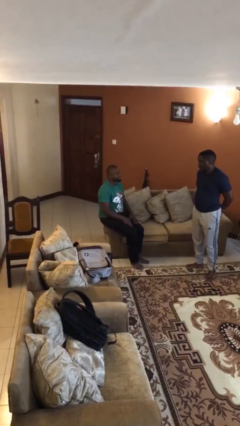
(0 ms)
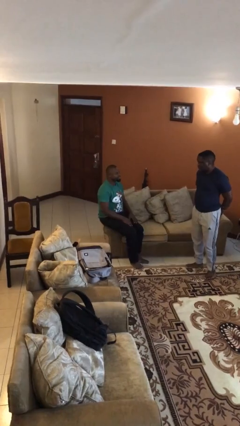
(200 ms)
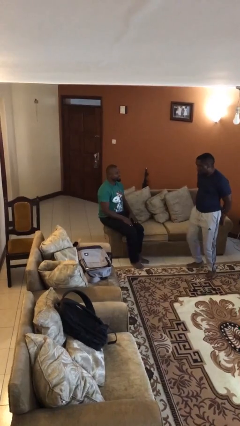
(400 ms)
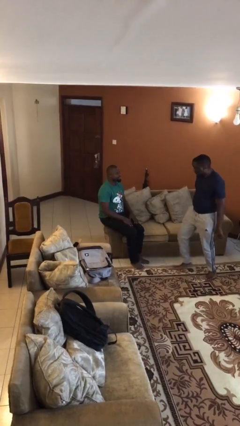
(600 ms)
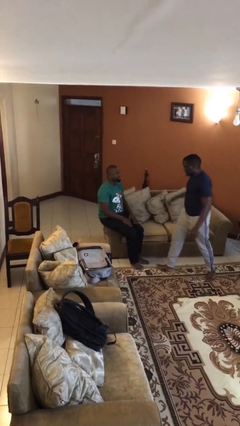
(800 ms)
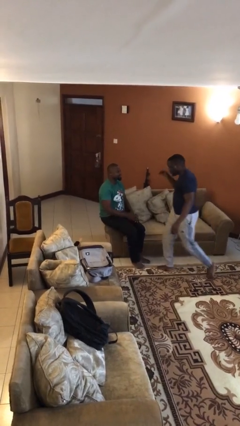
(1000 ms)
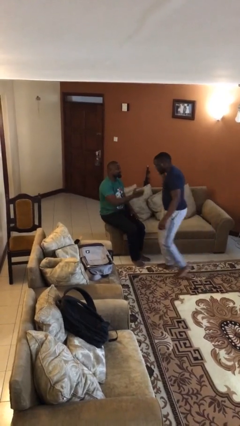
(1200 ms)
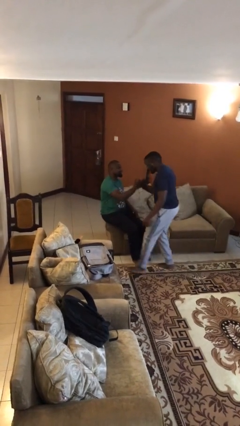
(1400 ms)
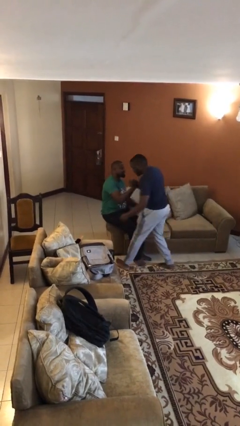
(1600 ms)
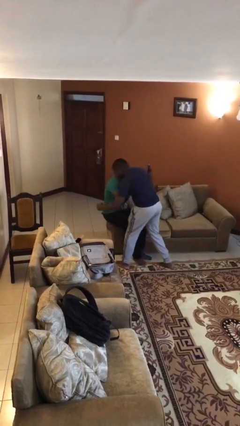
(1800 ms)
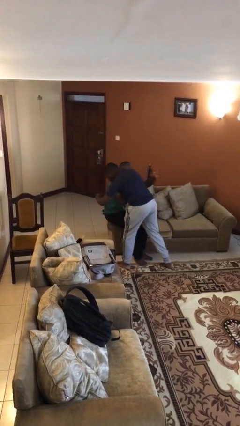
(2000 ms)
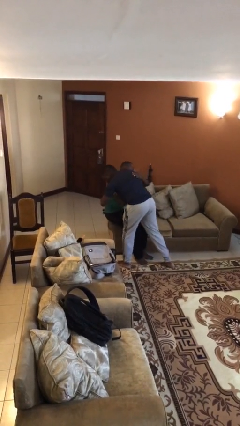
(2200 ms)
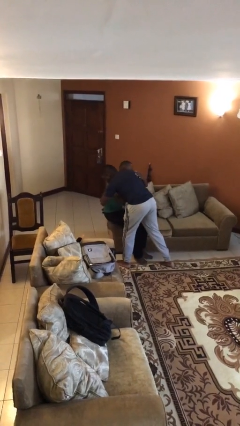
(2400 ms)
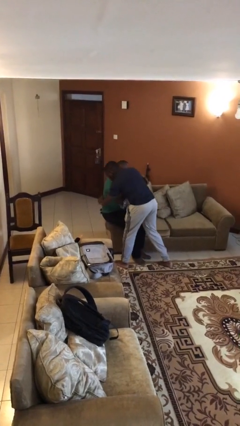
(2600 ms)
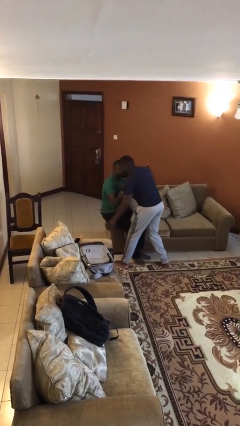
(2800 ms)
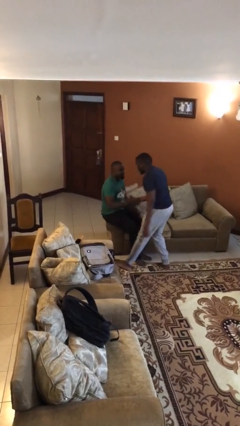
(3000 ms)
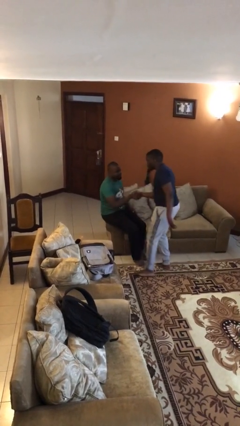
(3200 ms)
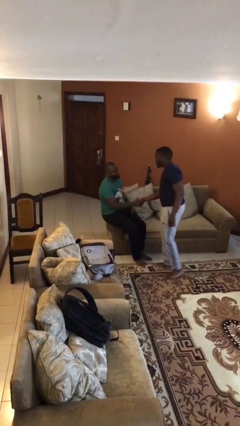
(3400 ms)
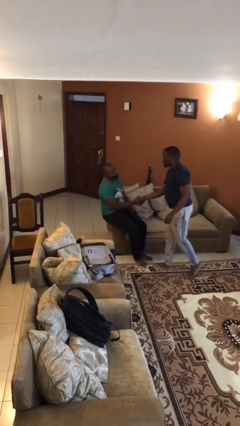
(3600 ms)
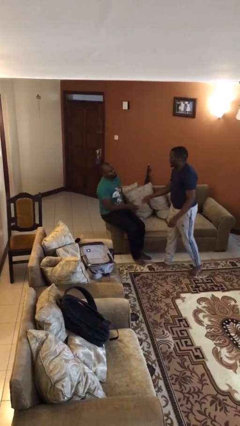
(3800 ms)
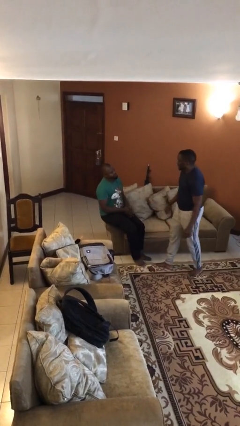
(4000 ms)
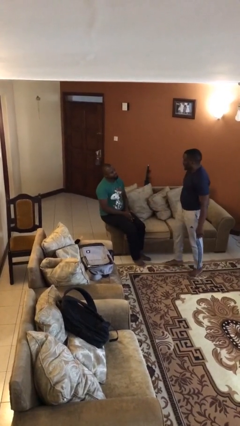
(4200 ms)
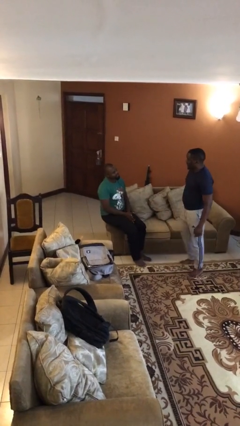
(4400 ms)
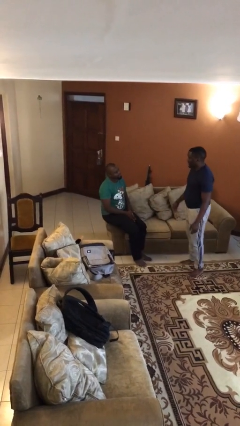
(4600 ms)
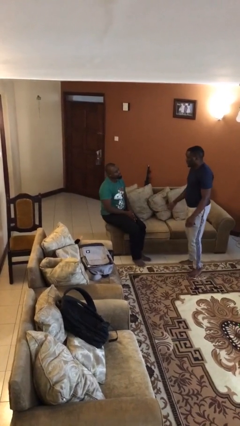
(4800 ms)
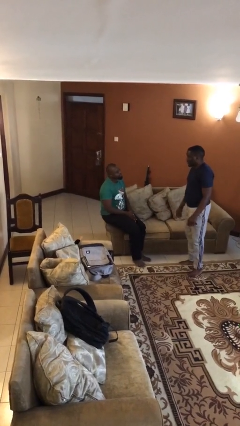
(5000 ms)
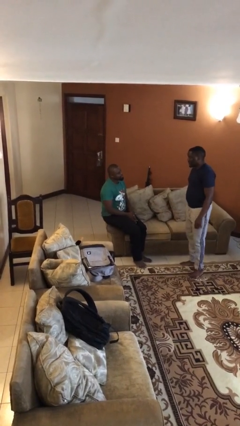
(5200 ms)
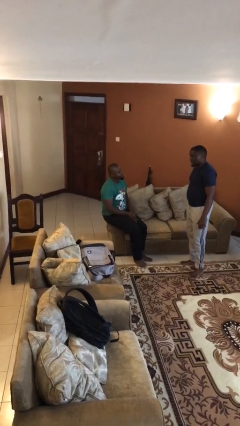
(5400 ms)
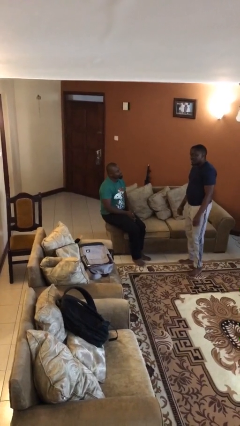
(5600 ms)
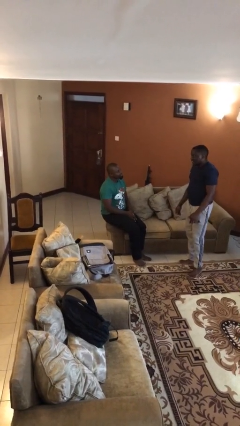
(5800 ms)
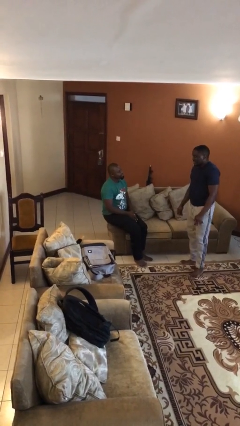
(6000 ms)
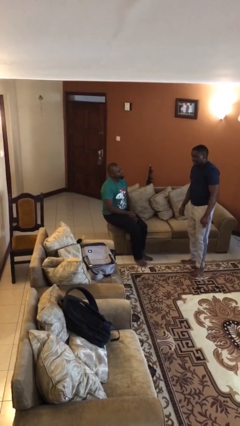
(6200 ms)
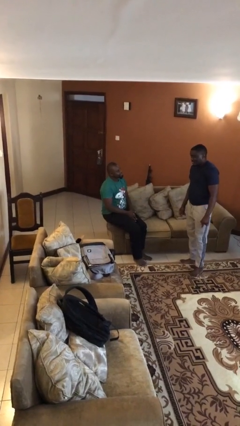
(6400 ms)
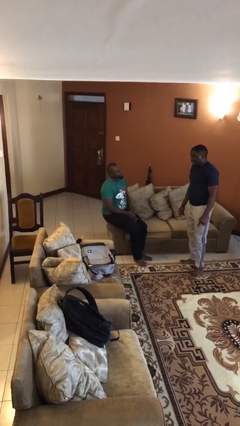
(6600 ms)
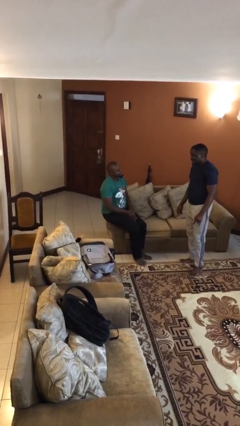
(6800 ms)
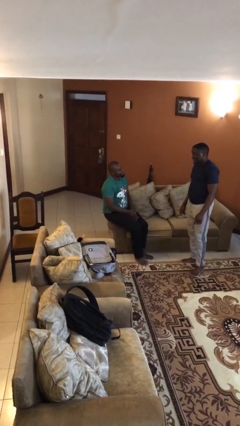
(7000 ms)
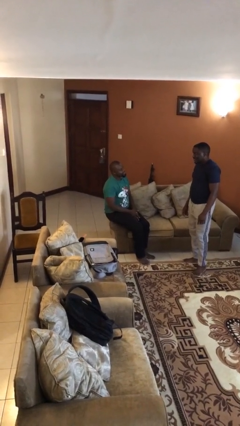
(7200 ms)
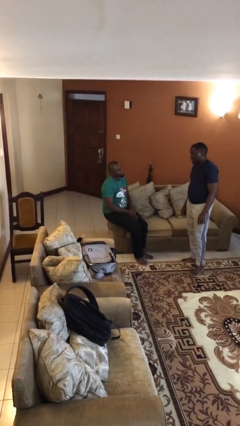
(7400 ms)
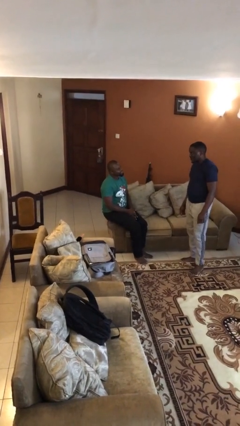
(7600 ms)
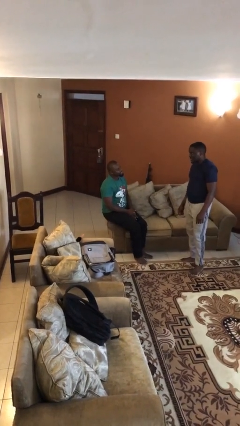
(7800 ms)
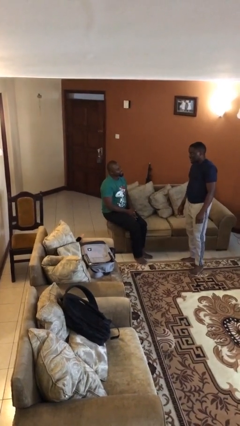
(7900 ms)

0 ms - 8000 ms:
person embraces person

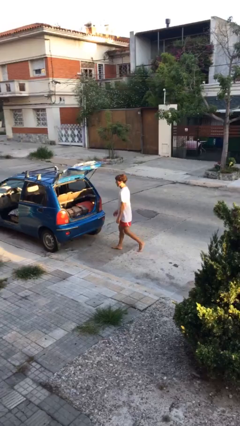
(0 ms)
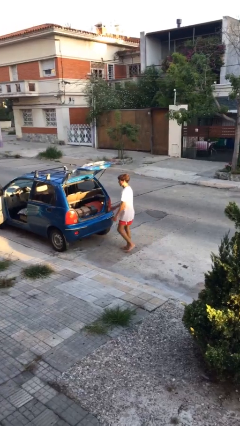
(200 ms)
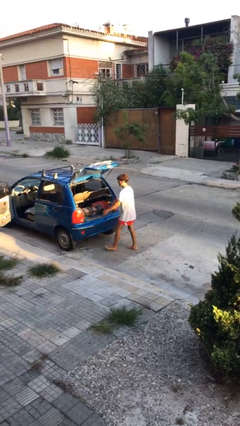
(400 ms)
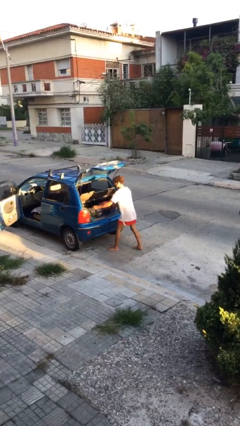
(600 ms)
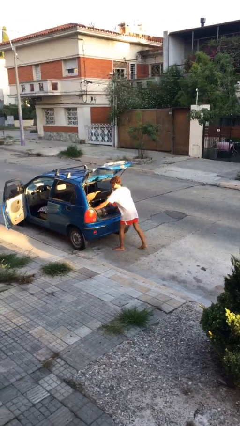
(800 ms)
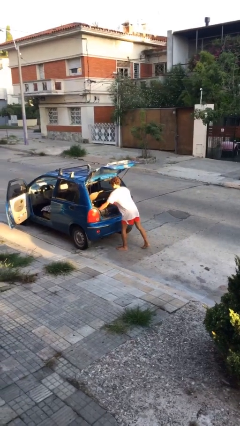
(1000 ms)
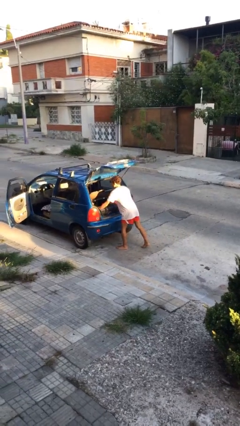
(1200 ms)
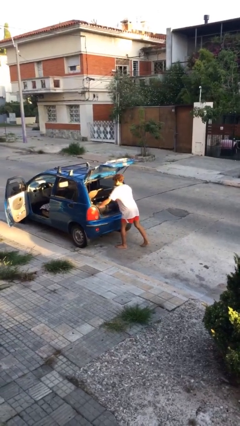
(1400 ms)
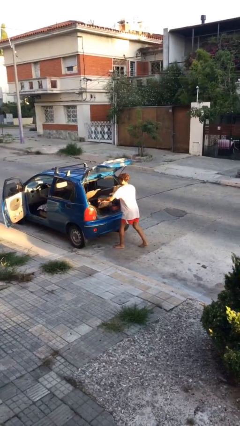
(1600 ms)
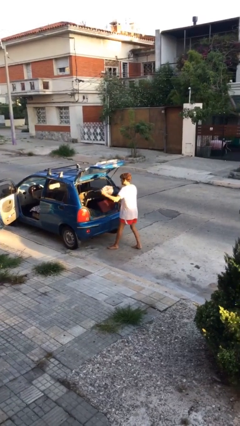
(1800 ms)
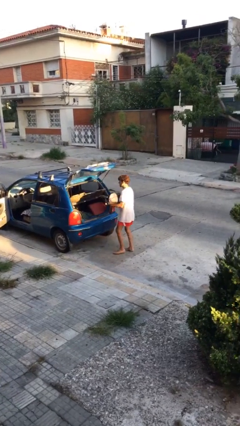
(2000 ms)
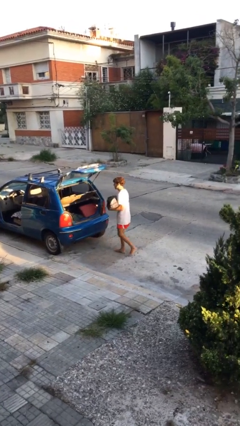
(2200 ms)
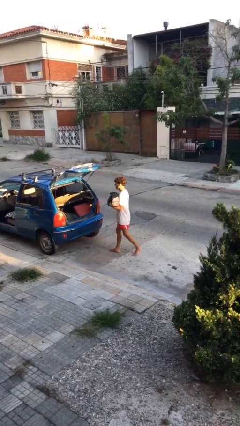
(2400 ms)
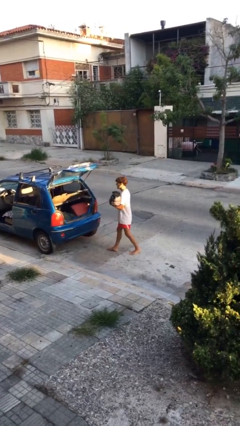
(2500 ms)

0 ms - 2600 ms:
person unloads car

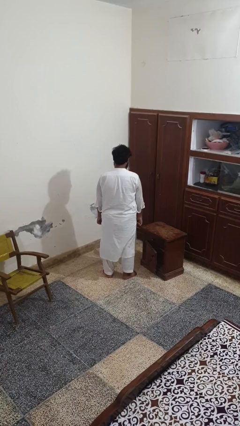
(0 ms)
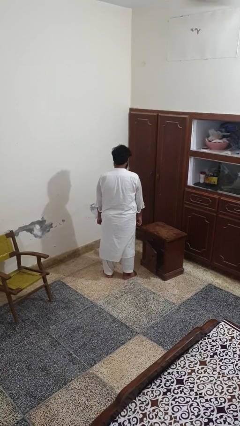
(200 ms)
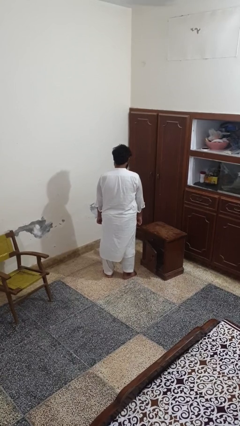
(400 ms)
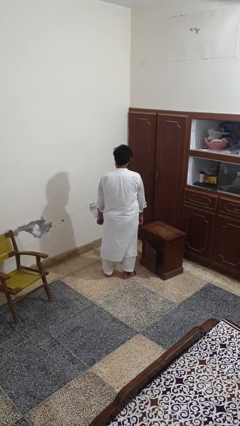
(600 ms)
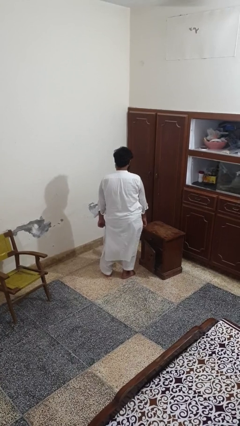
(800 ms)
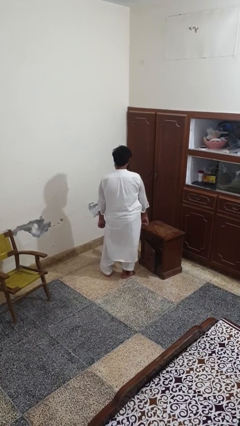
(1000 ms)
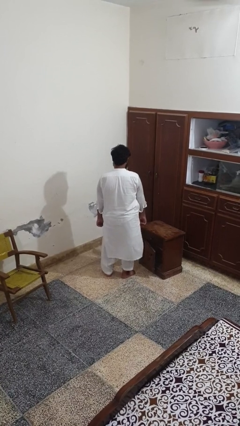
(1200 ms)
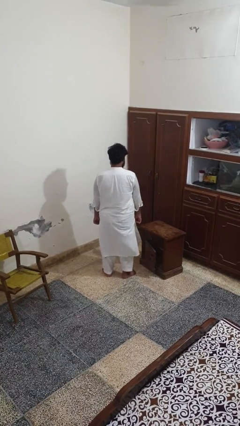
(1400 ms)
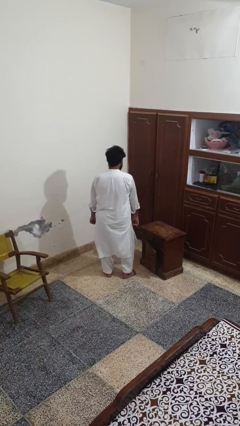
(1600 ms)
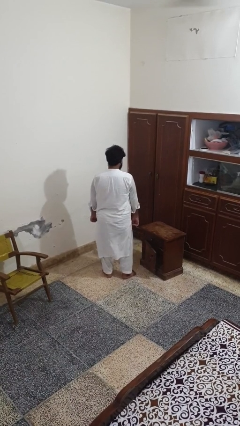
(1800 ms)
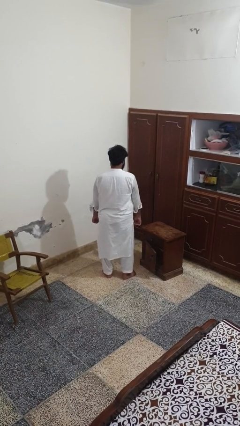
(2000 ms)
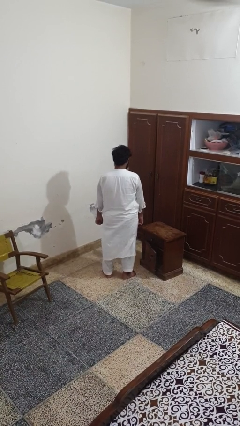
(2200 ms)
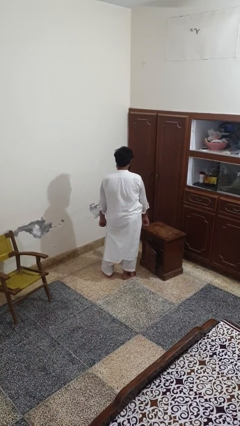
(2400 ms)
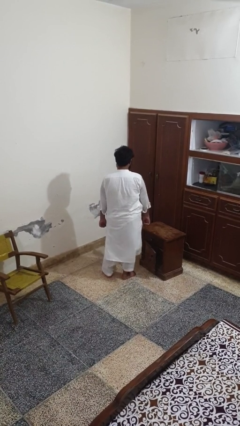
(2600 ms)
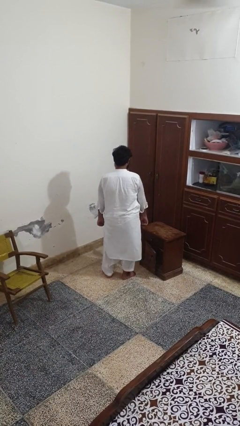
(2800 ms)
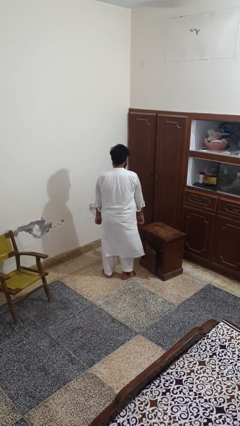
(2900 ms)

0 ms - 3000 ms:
person wiggles hips

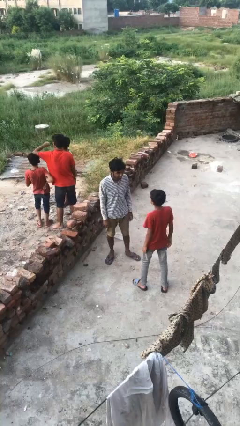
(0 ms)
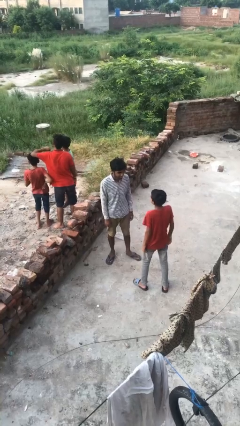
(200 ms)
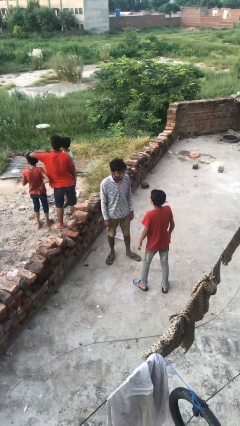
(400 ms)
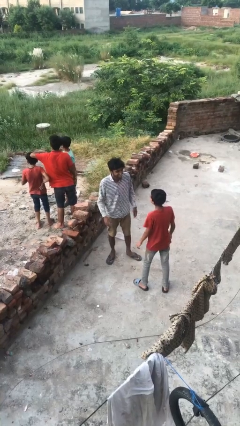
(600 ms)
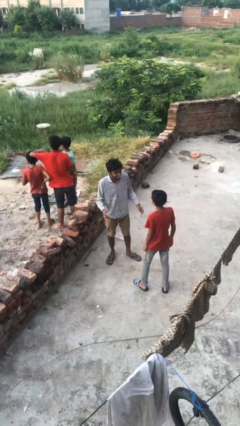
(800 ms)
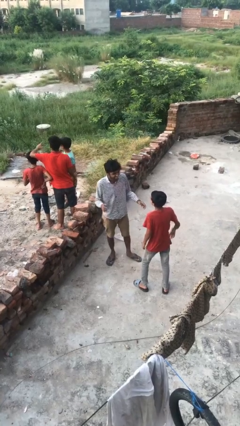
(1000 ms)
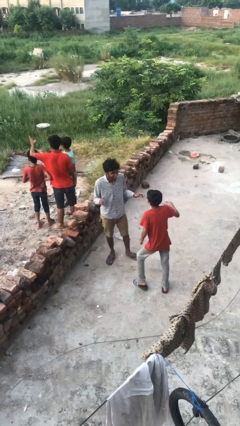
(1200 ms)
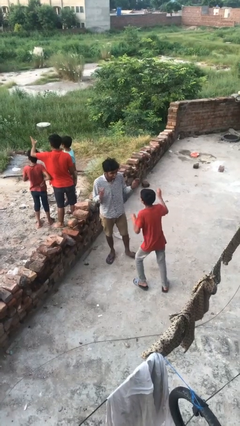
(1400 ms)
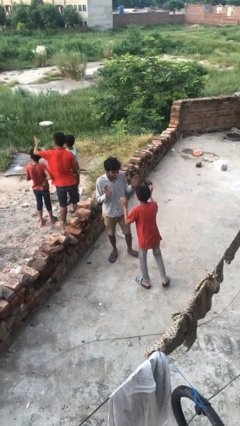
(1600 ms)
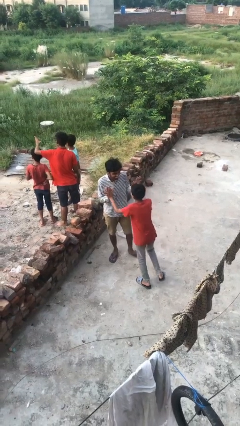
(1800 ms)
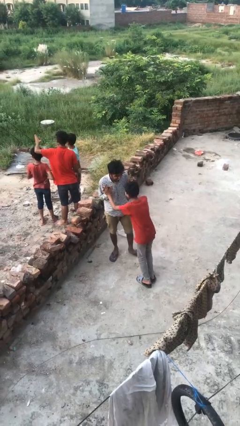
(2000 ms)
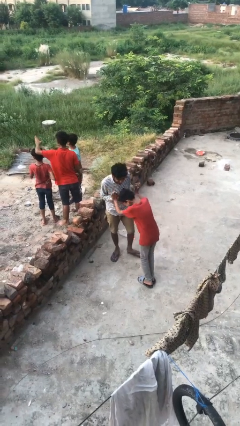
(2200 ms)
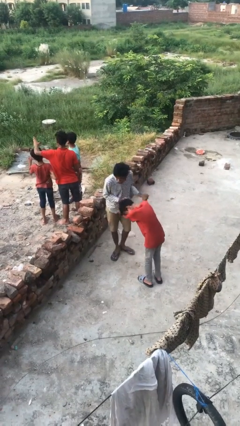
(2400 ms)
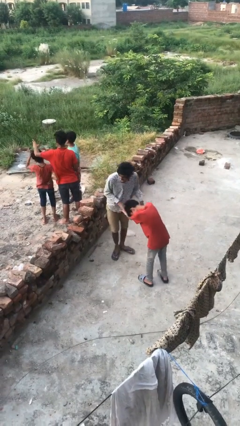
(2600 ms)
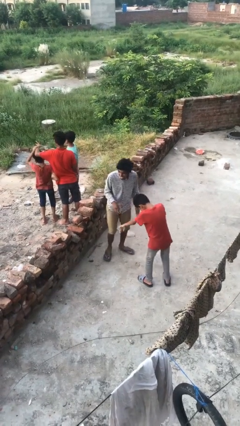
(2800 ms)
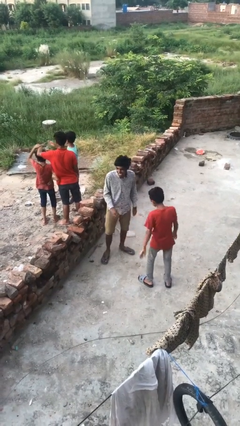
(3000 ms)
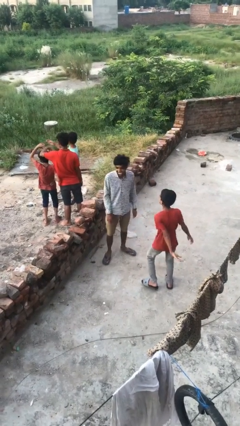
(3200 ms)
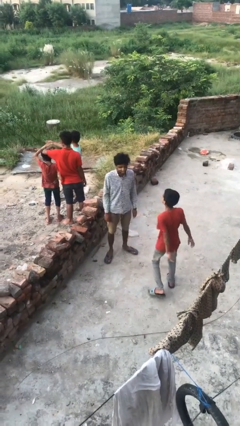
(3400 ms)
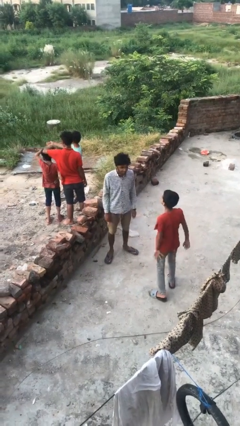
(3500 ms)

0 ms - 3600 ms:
person laughs with person

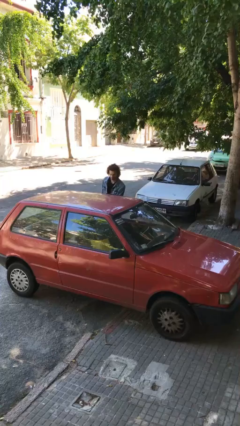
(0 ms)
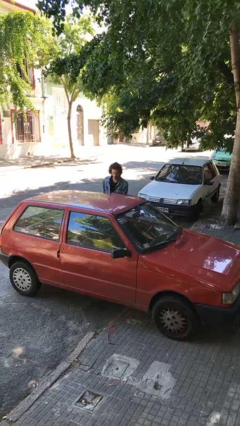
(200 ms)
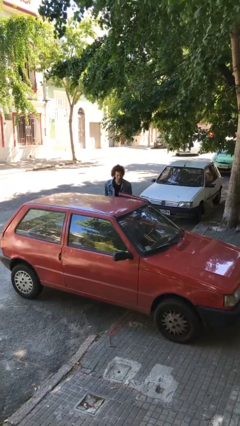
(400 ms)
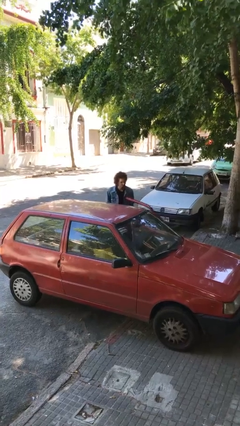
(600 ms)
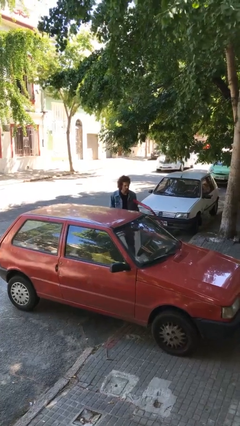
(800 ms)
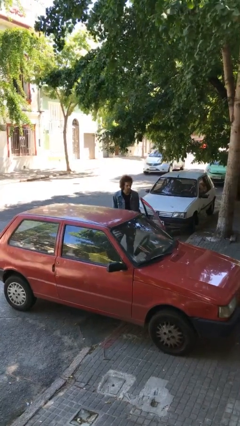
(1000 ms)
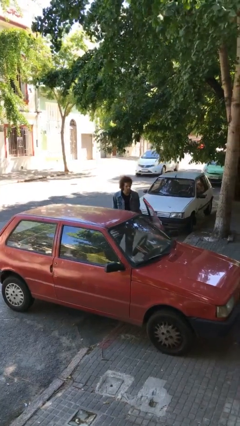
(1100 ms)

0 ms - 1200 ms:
person opens car door
